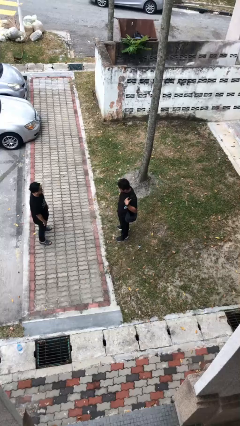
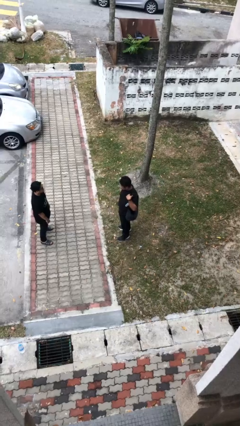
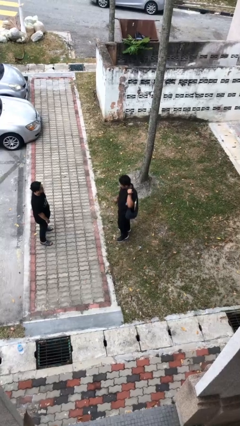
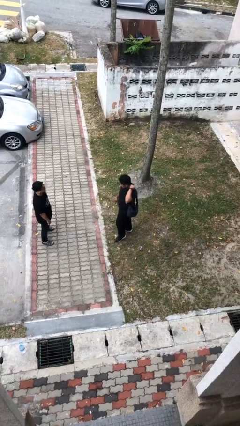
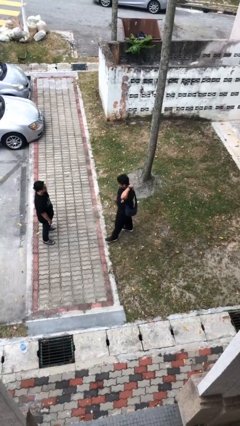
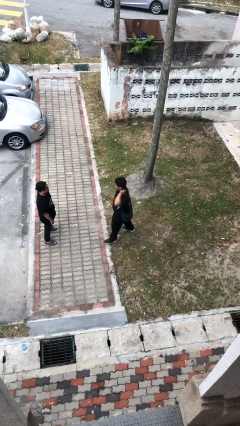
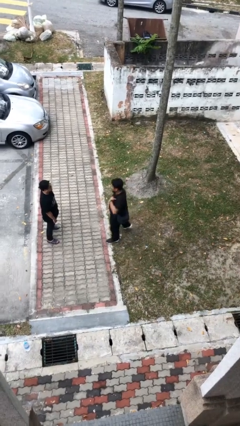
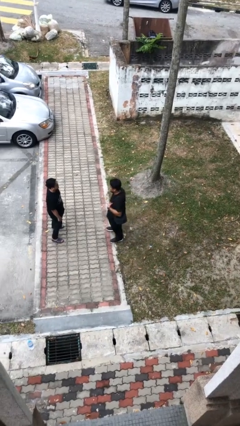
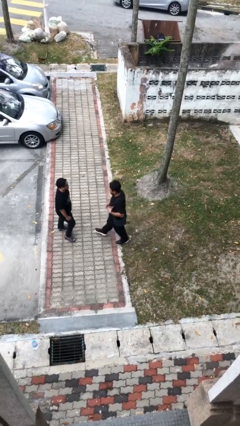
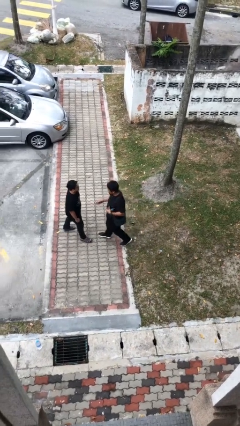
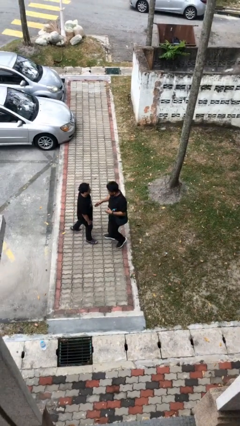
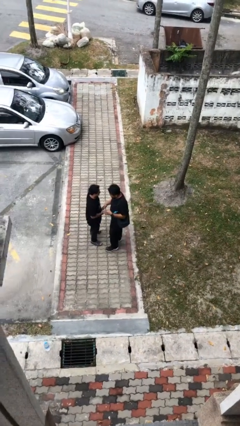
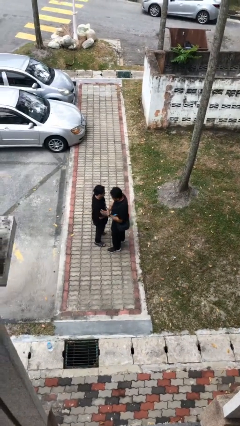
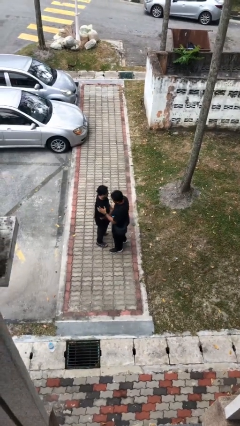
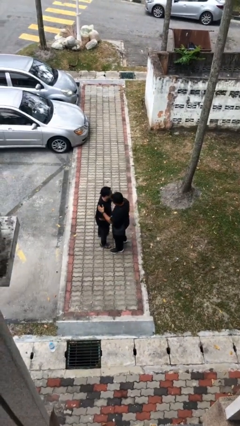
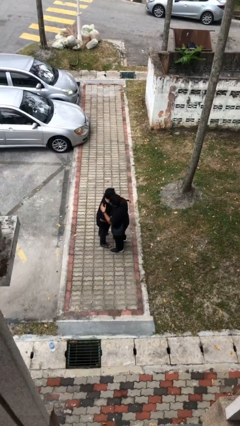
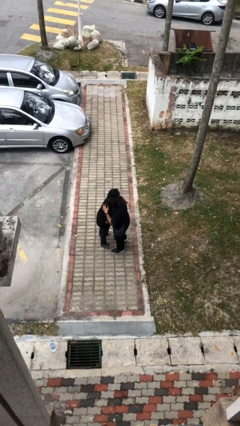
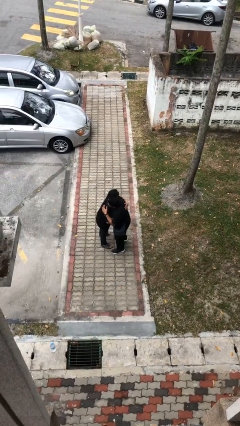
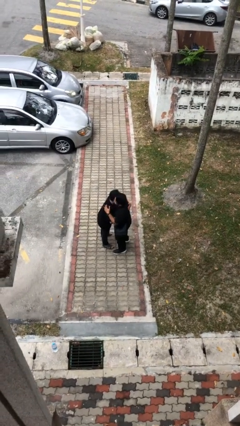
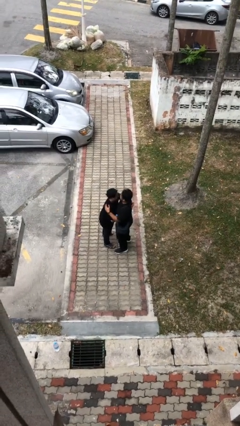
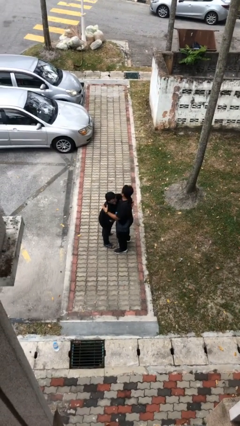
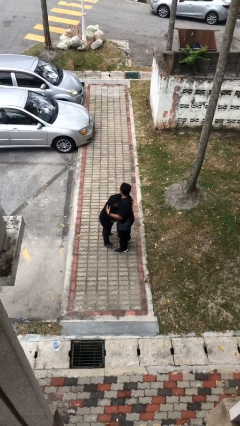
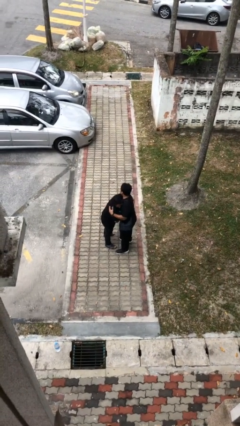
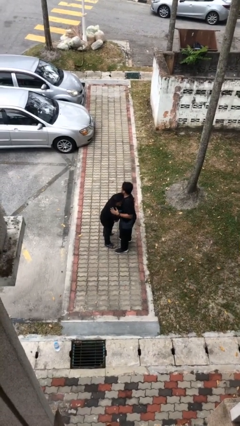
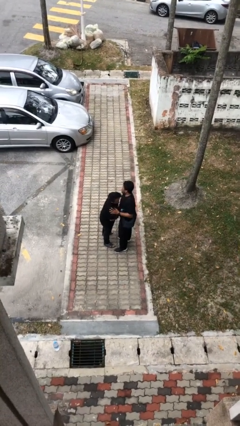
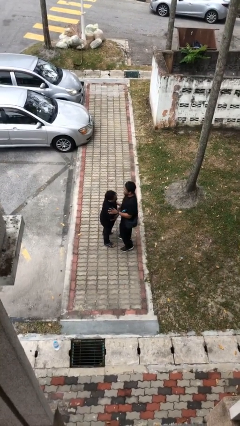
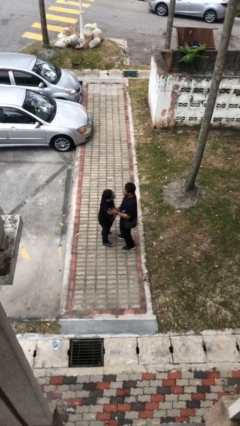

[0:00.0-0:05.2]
person embraces person

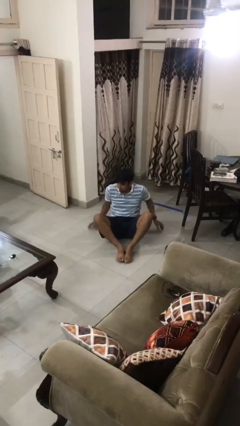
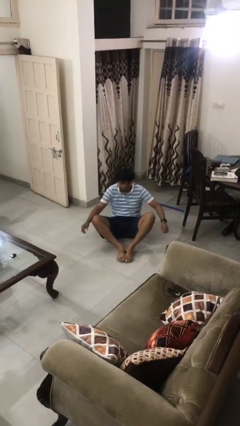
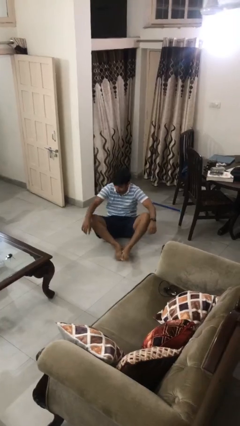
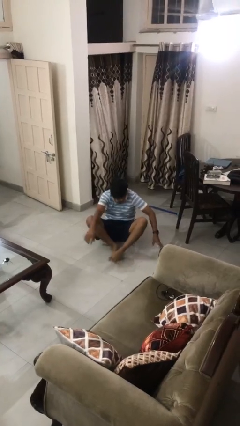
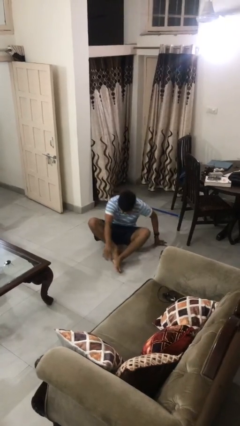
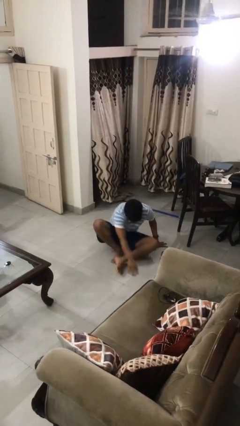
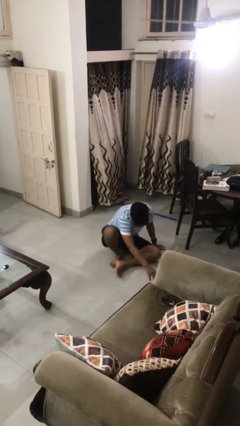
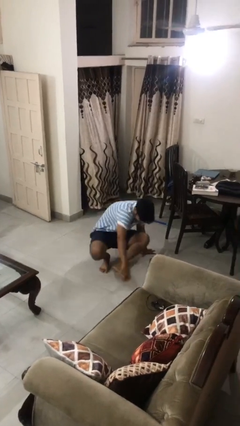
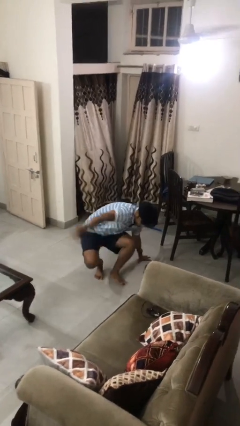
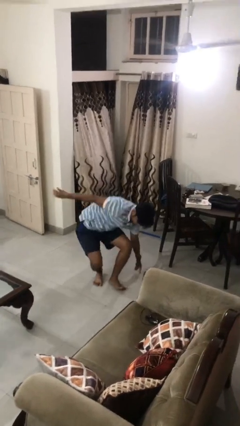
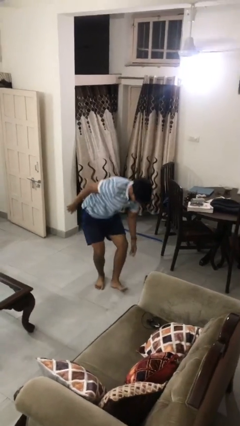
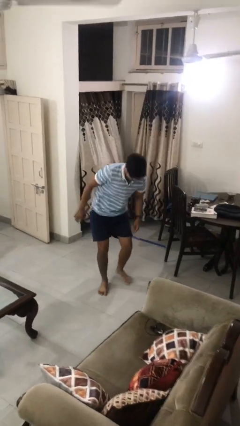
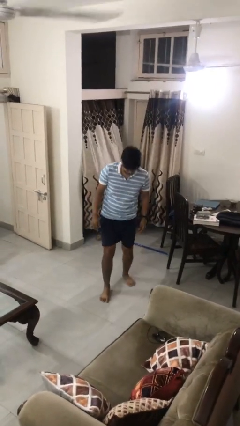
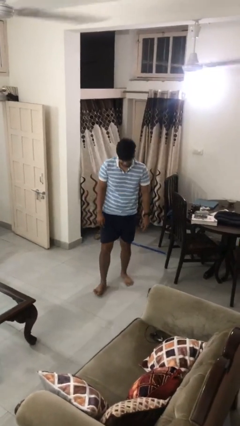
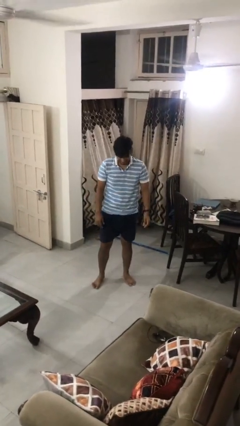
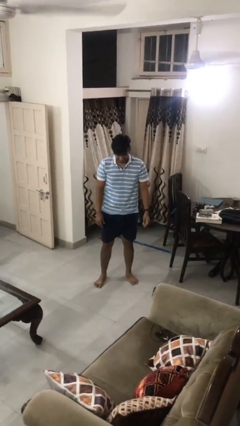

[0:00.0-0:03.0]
person stands up from floor

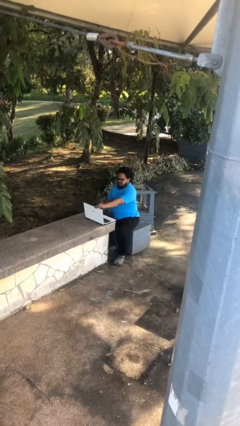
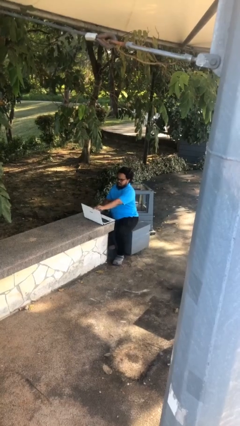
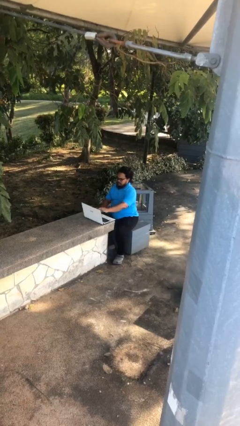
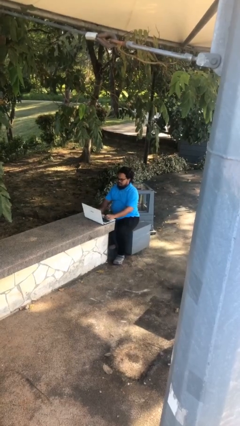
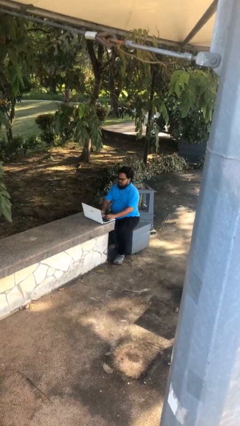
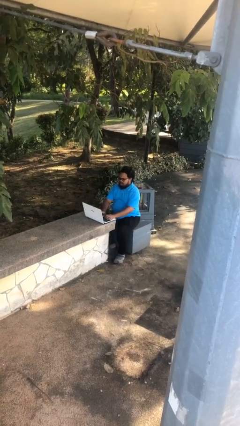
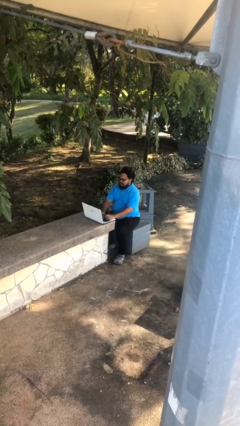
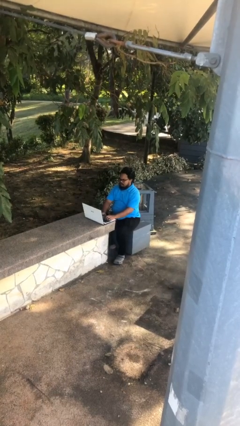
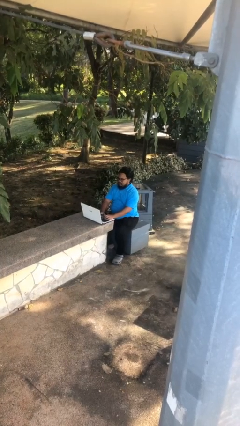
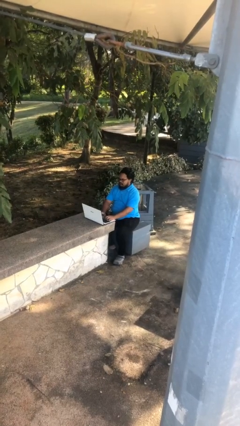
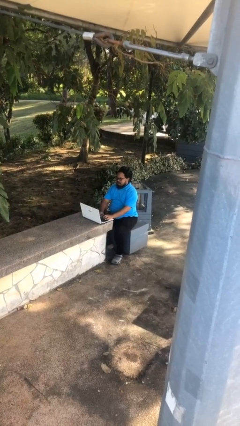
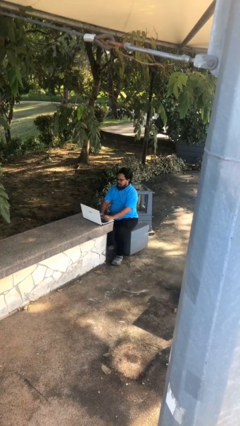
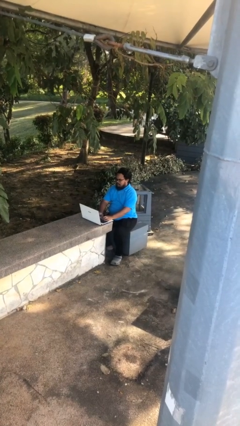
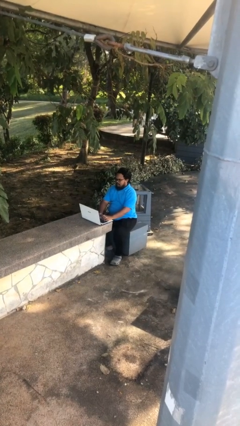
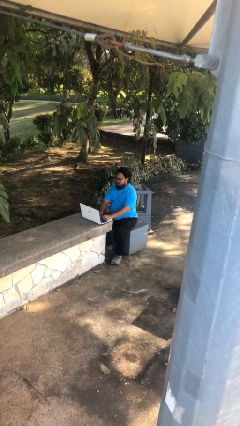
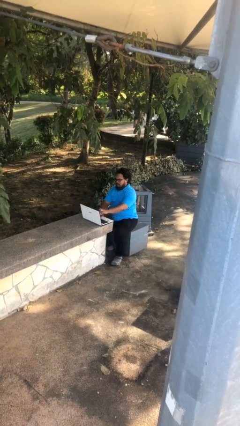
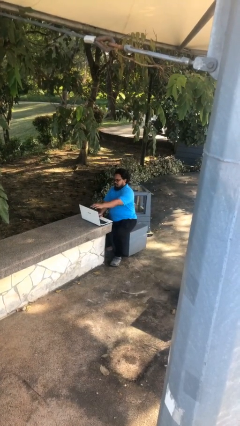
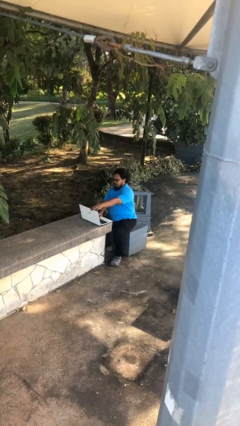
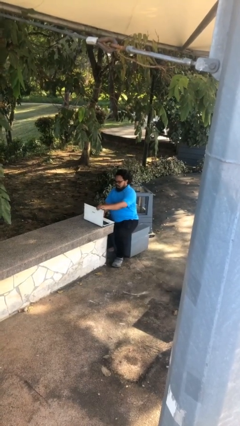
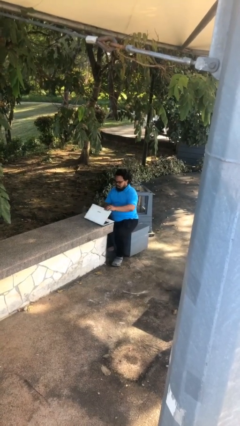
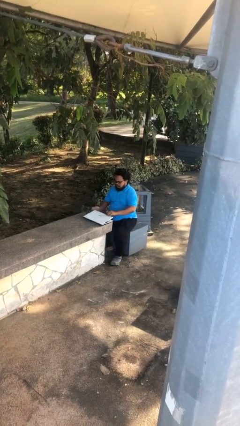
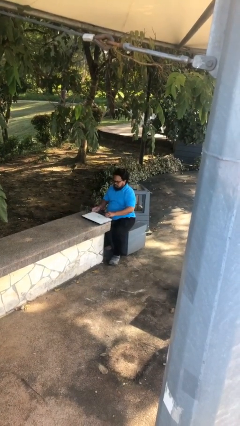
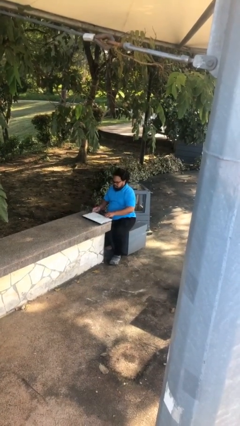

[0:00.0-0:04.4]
person interacts with laptop

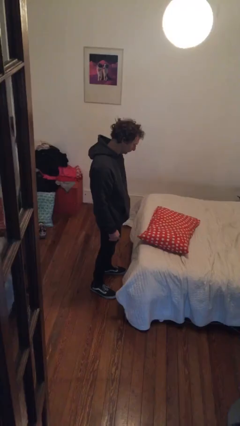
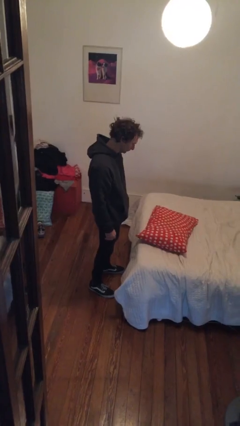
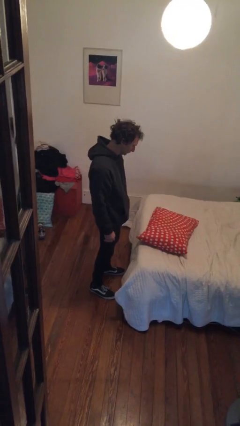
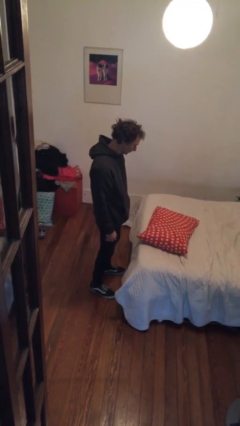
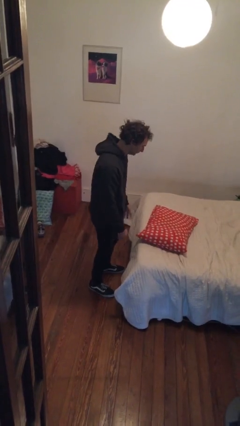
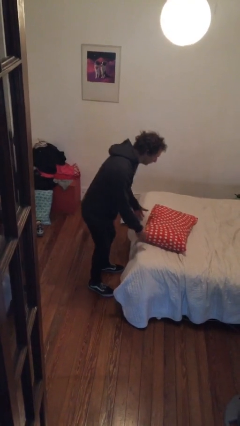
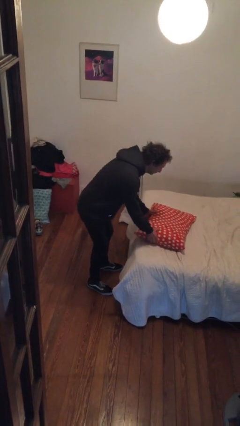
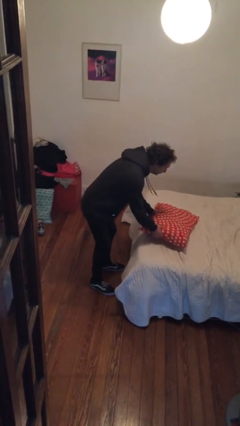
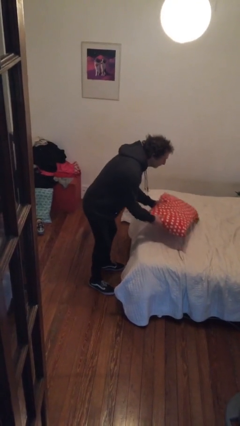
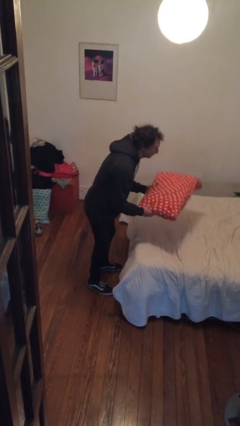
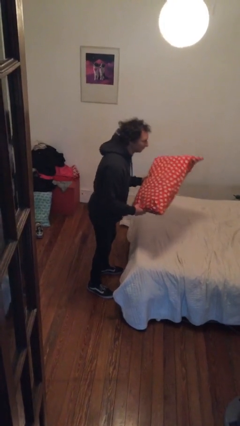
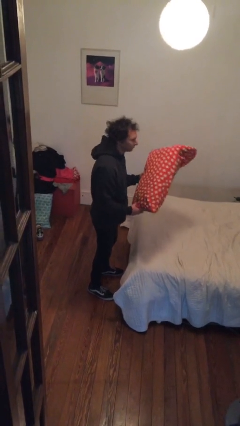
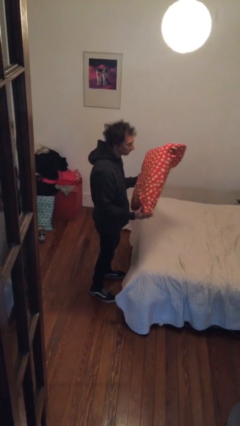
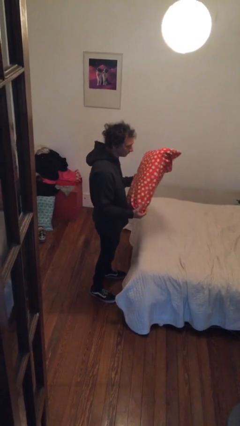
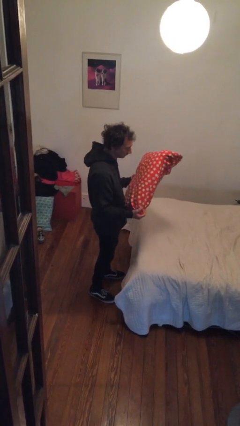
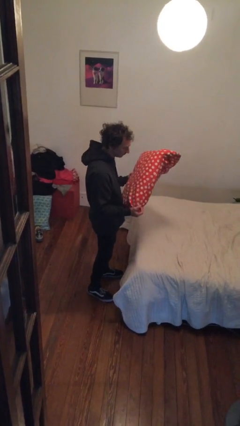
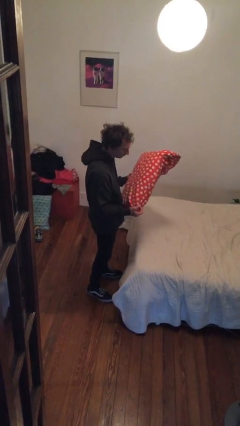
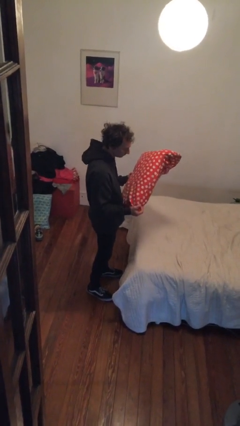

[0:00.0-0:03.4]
person picks up object from bed

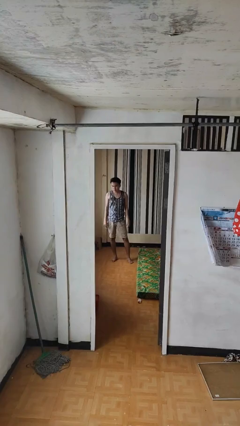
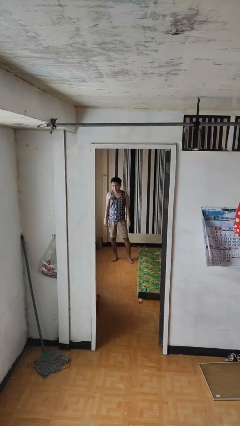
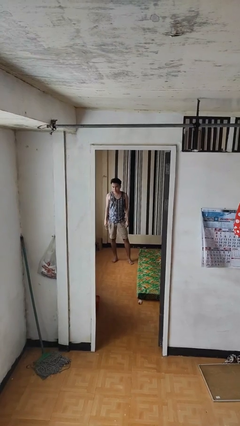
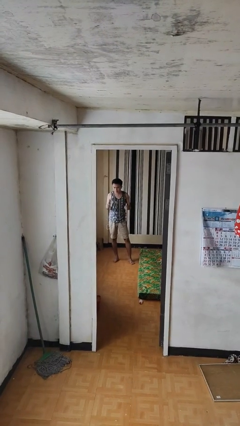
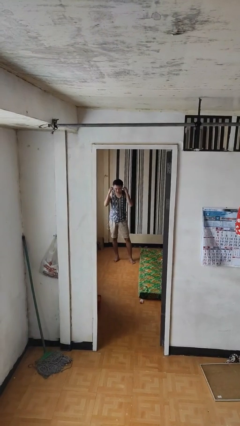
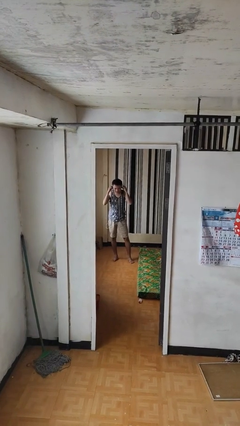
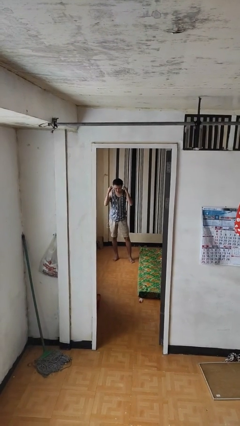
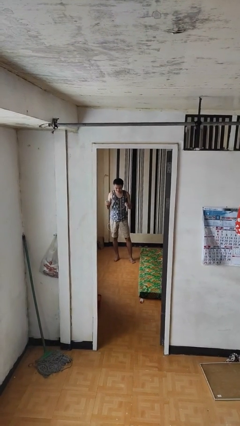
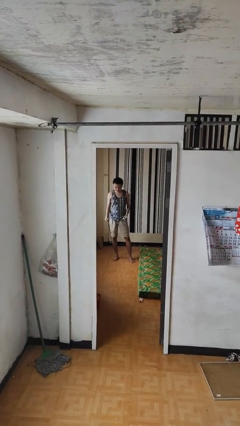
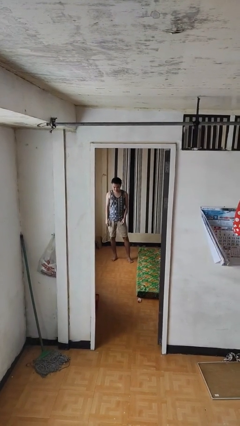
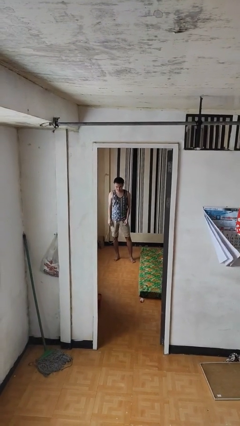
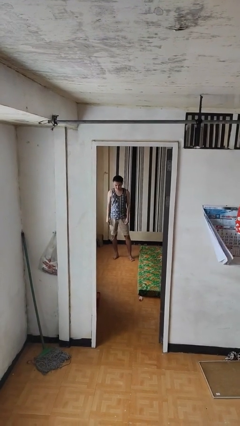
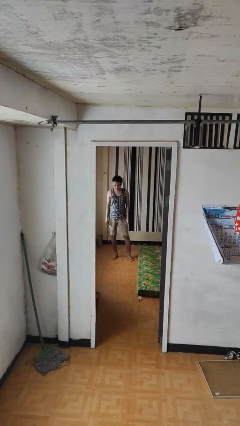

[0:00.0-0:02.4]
person takes off headphones
